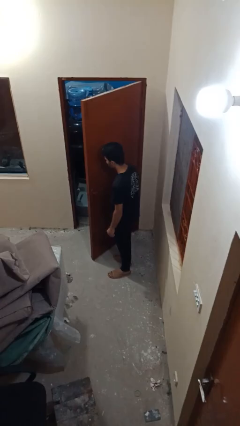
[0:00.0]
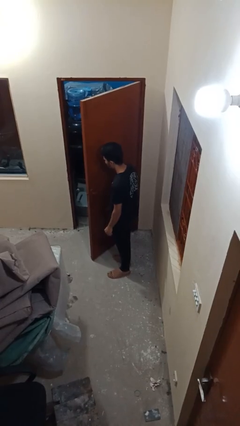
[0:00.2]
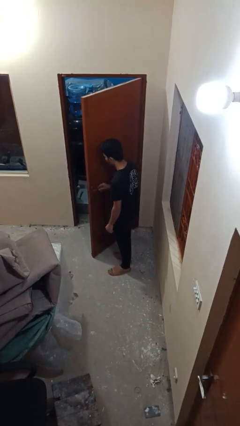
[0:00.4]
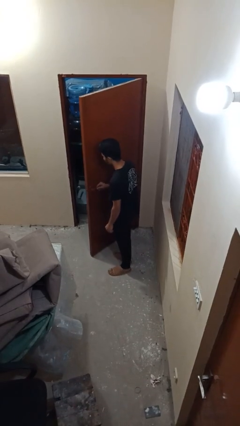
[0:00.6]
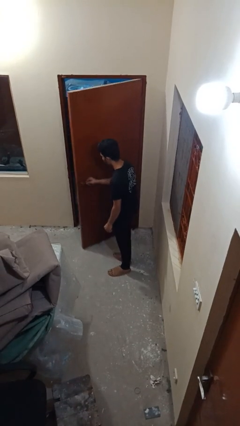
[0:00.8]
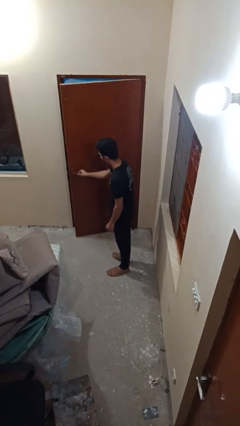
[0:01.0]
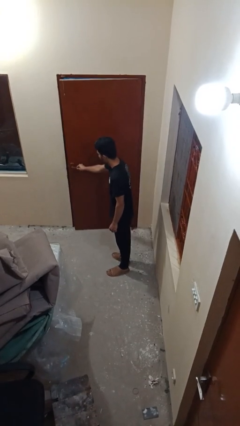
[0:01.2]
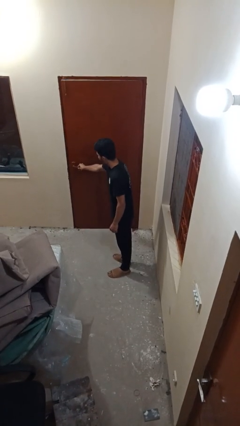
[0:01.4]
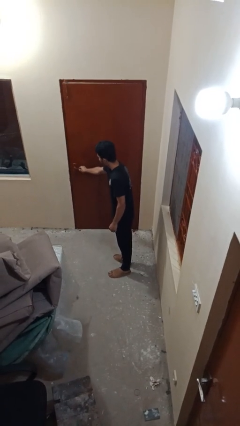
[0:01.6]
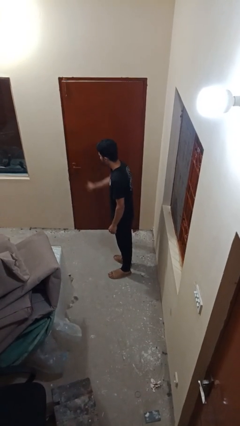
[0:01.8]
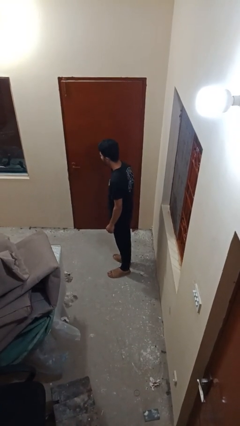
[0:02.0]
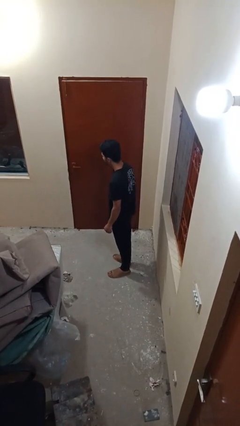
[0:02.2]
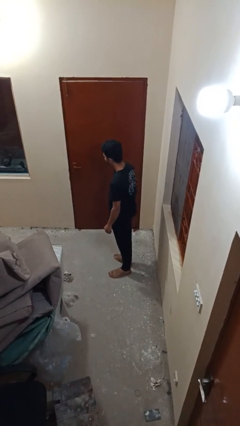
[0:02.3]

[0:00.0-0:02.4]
person closes facility door

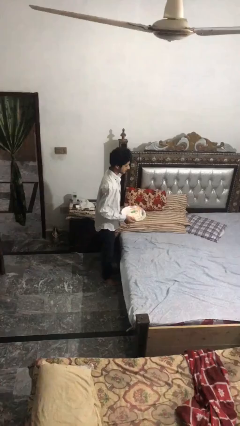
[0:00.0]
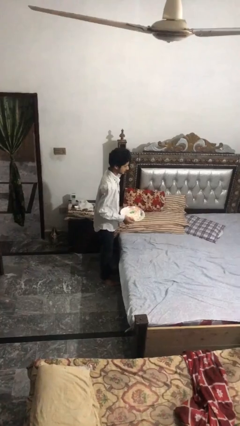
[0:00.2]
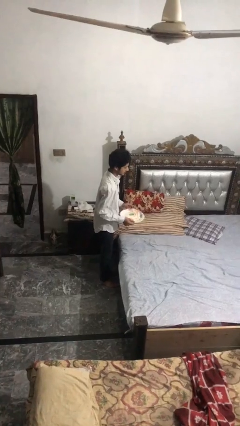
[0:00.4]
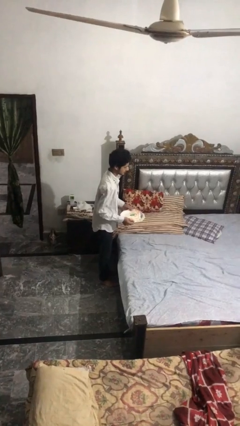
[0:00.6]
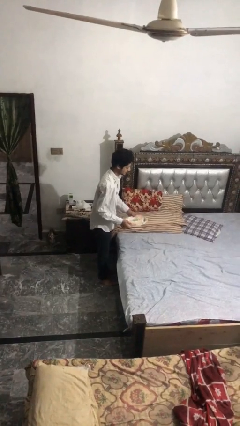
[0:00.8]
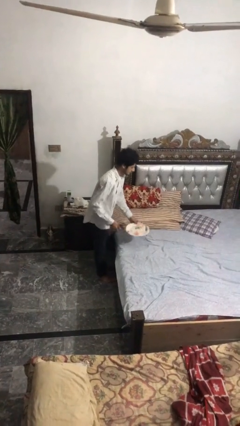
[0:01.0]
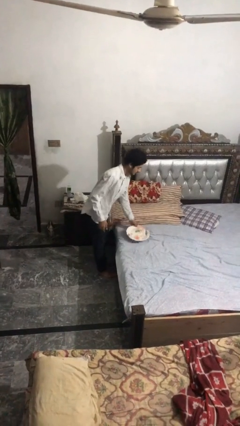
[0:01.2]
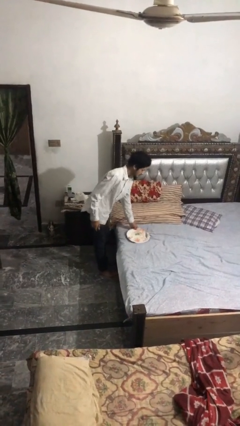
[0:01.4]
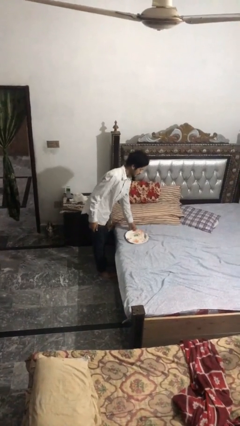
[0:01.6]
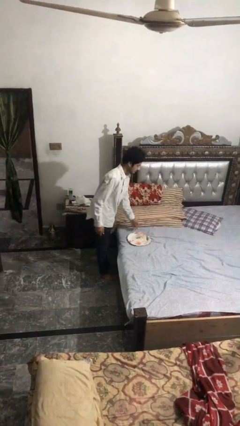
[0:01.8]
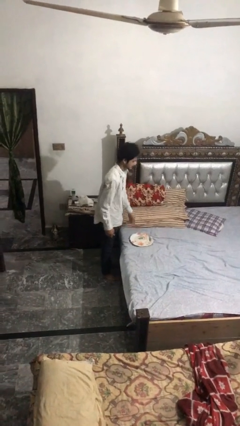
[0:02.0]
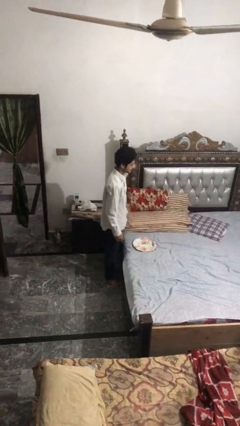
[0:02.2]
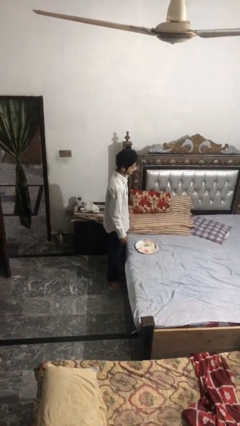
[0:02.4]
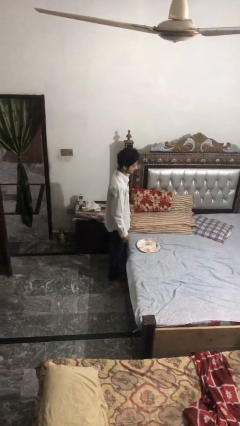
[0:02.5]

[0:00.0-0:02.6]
person puts down object on bed

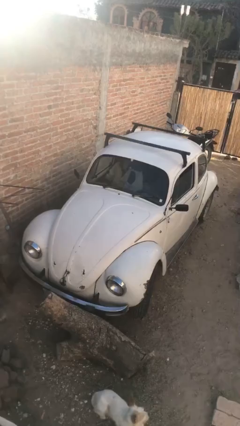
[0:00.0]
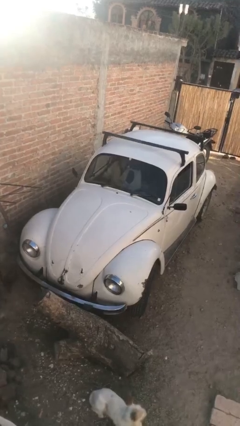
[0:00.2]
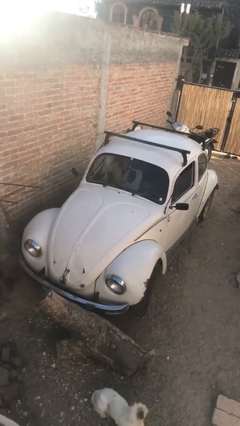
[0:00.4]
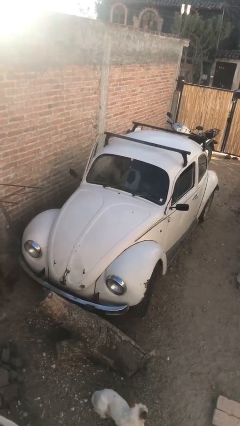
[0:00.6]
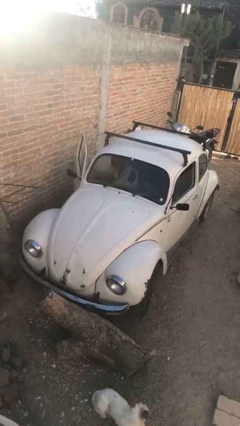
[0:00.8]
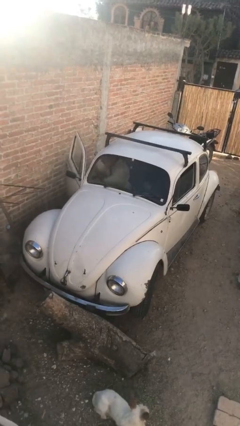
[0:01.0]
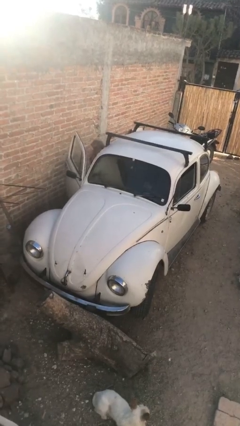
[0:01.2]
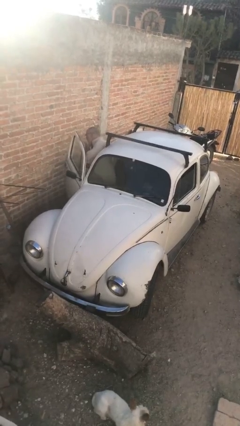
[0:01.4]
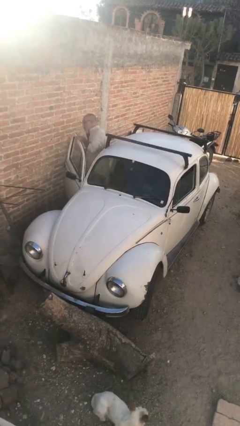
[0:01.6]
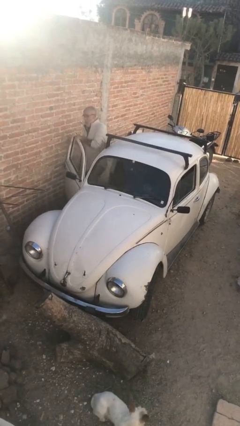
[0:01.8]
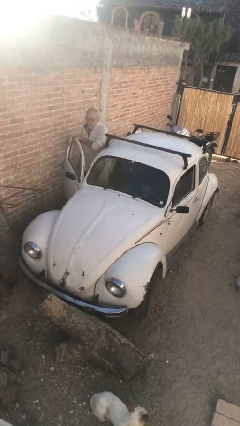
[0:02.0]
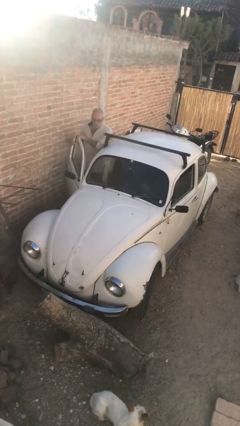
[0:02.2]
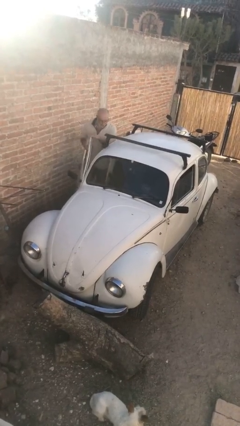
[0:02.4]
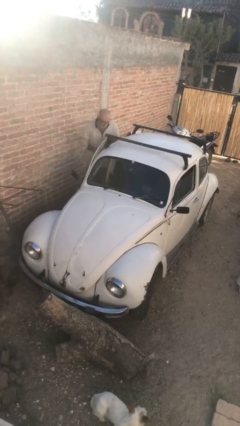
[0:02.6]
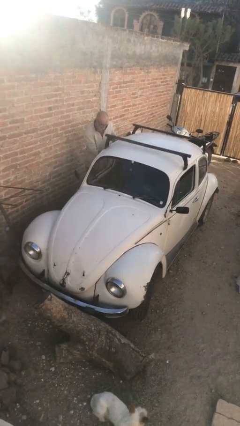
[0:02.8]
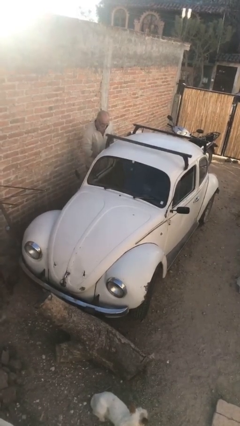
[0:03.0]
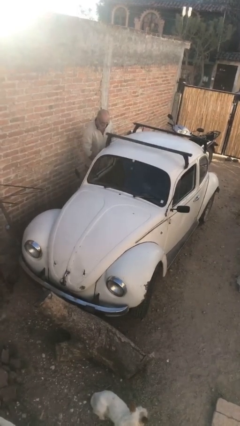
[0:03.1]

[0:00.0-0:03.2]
car drops off person

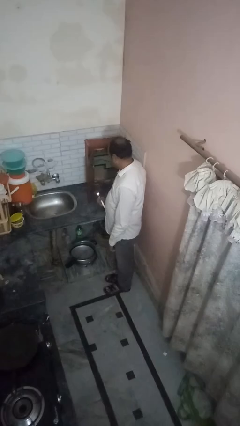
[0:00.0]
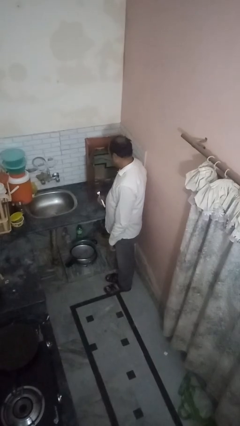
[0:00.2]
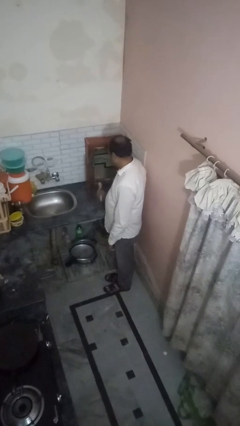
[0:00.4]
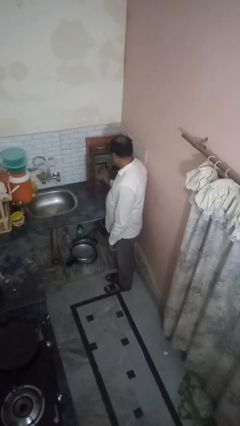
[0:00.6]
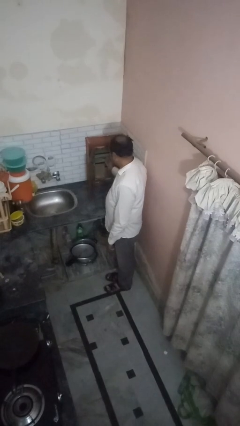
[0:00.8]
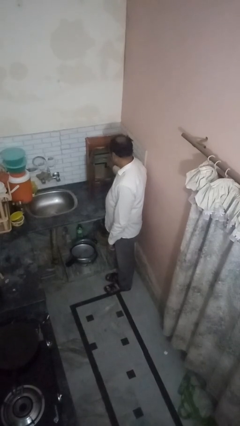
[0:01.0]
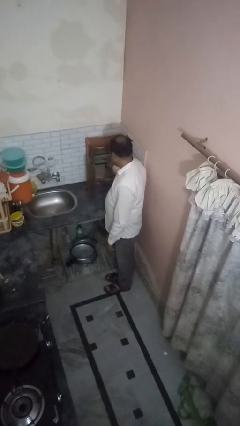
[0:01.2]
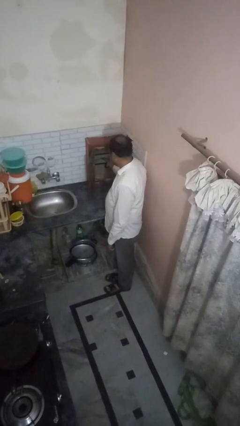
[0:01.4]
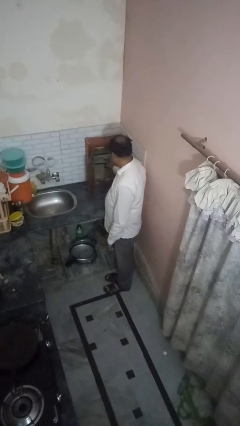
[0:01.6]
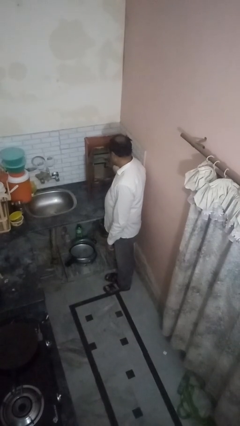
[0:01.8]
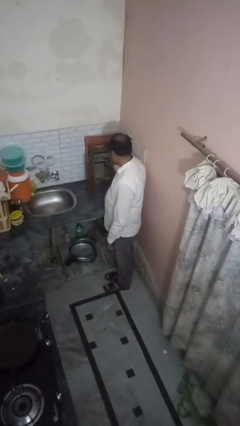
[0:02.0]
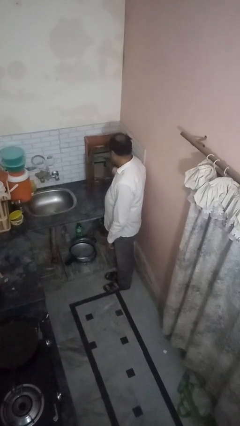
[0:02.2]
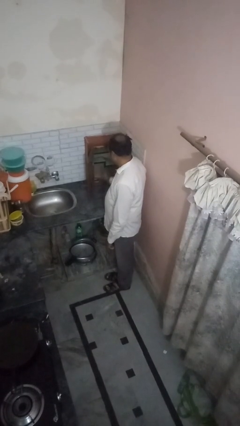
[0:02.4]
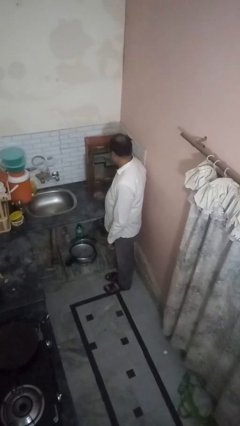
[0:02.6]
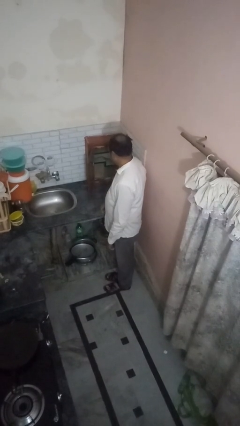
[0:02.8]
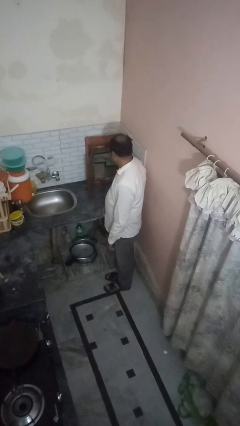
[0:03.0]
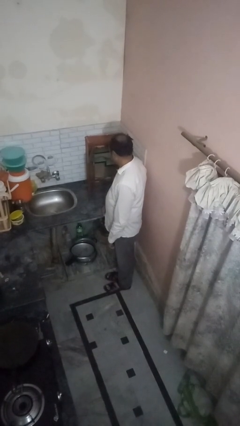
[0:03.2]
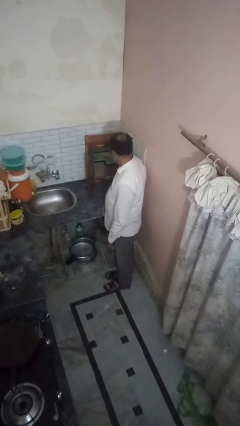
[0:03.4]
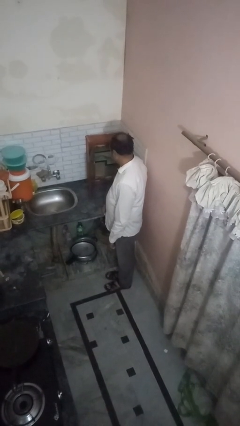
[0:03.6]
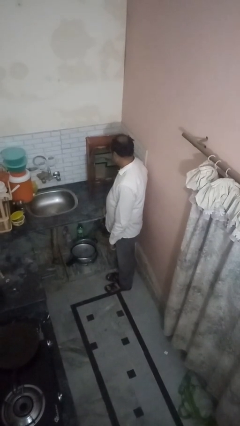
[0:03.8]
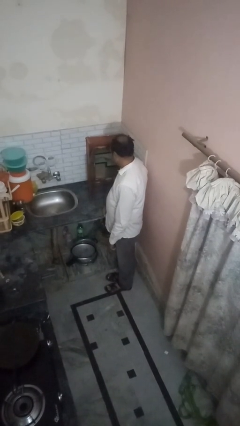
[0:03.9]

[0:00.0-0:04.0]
person puts object into kitchen drawer

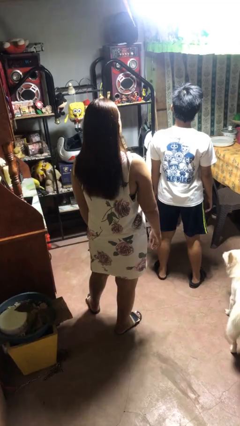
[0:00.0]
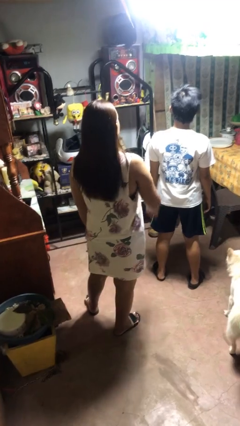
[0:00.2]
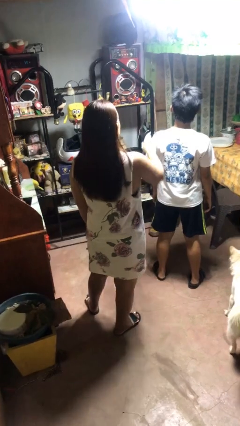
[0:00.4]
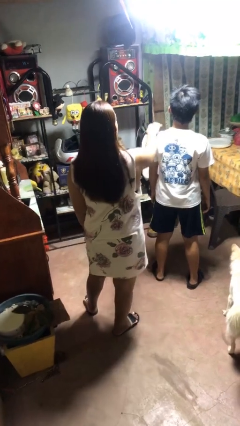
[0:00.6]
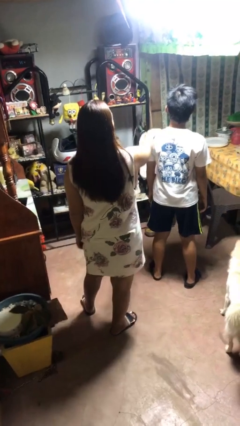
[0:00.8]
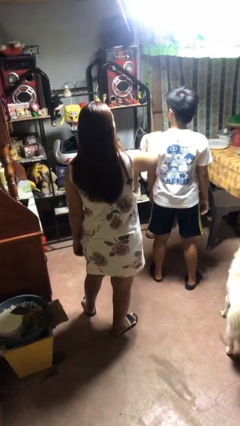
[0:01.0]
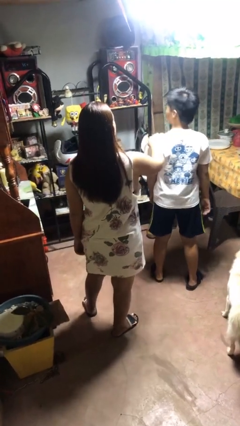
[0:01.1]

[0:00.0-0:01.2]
person grabs person by shoulder

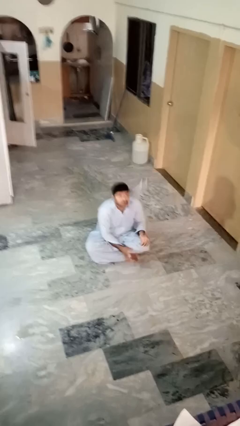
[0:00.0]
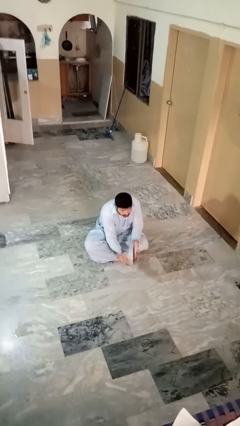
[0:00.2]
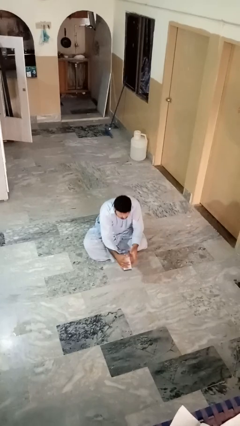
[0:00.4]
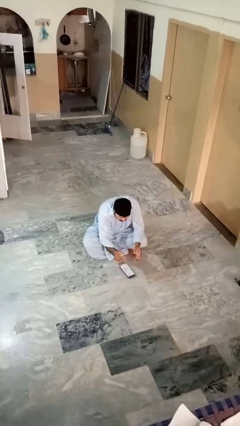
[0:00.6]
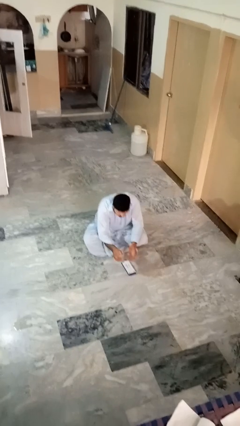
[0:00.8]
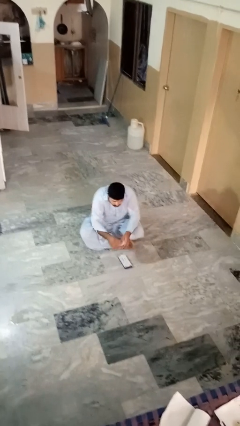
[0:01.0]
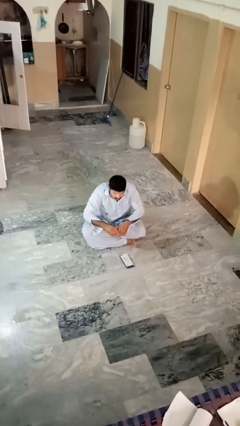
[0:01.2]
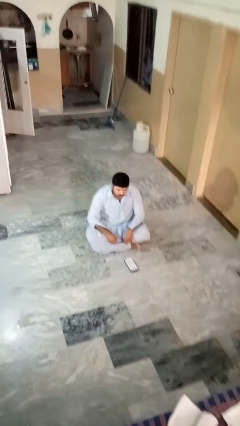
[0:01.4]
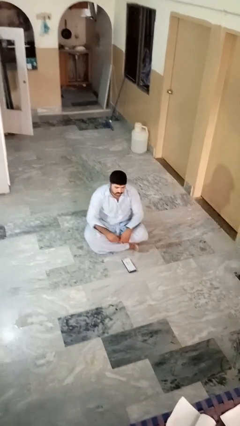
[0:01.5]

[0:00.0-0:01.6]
person catches dropped object

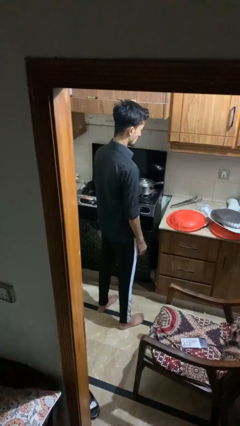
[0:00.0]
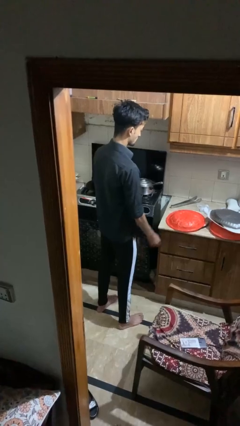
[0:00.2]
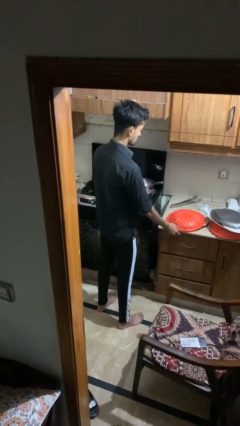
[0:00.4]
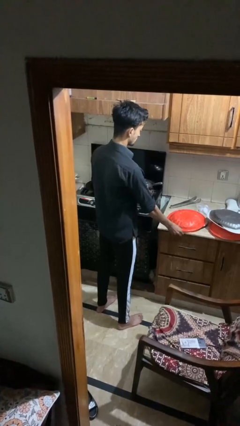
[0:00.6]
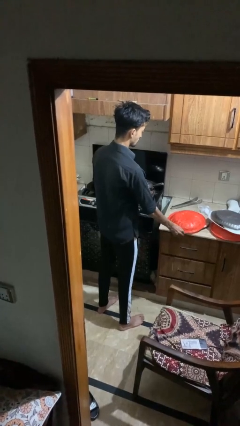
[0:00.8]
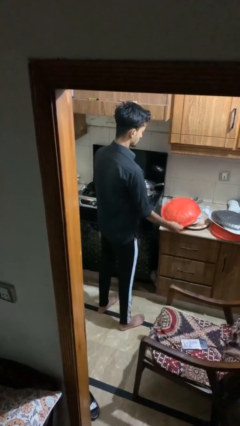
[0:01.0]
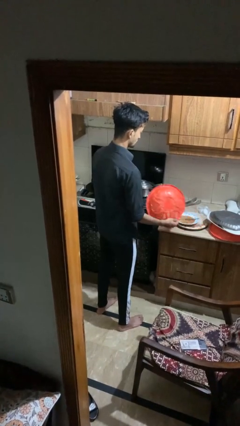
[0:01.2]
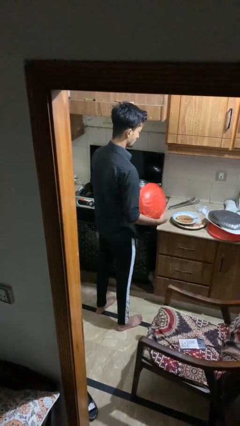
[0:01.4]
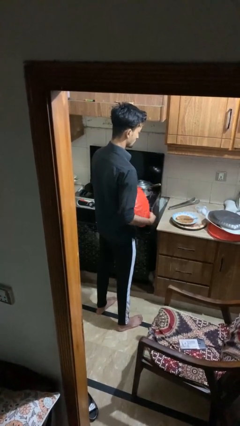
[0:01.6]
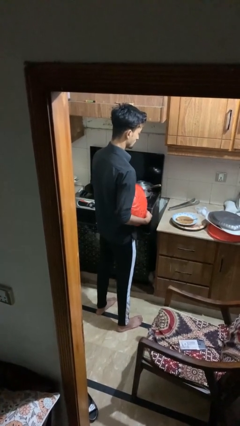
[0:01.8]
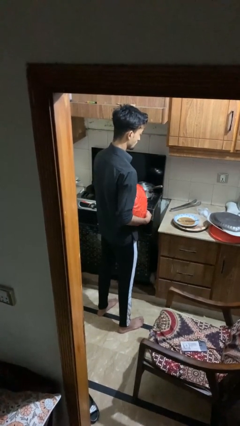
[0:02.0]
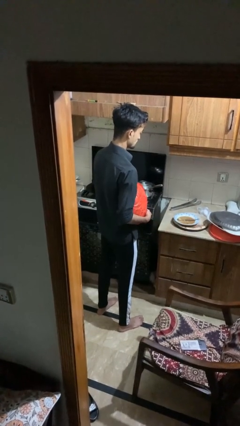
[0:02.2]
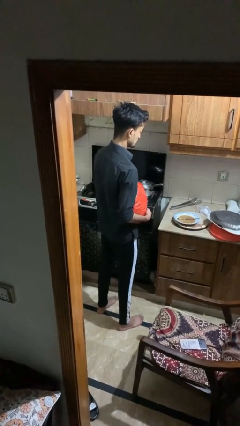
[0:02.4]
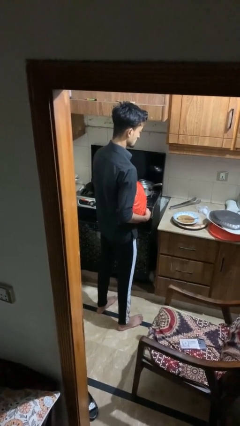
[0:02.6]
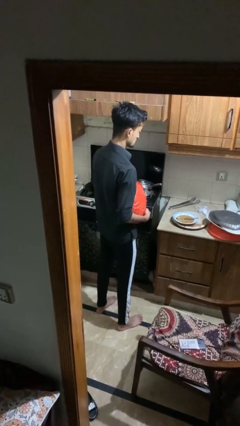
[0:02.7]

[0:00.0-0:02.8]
person picks up object from shelf
